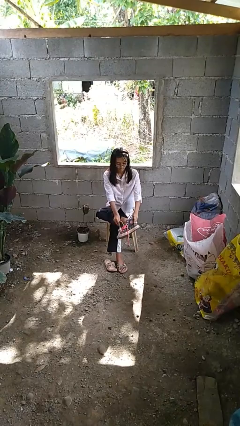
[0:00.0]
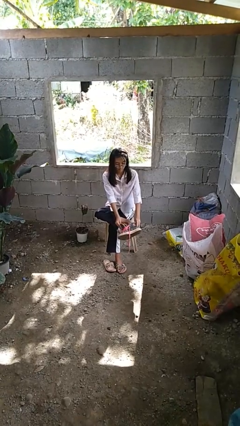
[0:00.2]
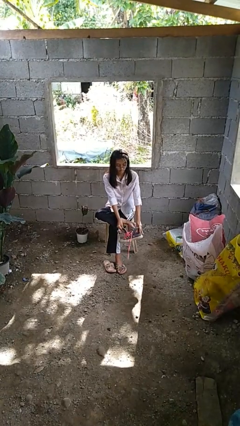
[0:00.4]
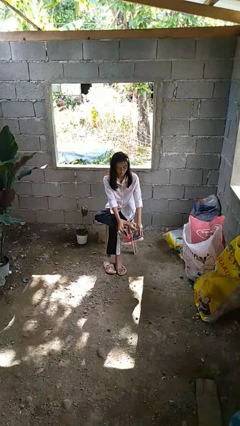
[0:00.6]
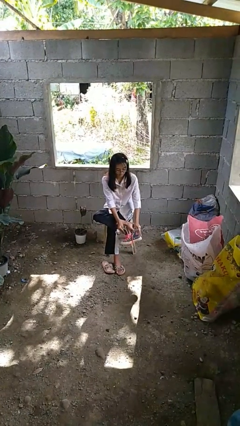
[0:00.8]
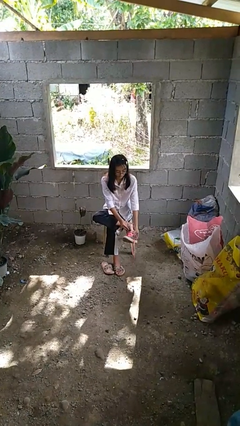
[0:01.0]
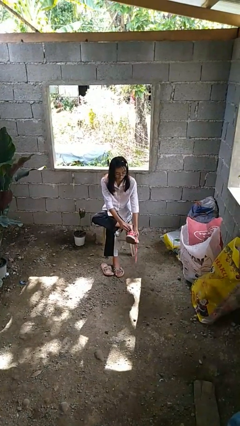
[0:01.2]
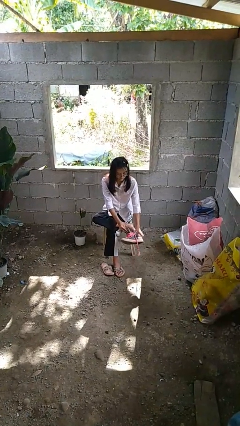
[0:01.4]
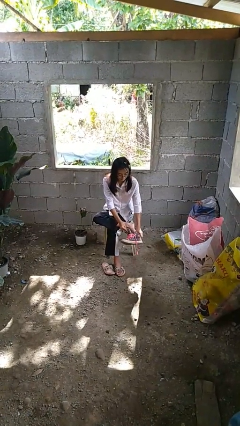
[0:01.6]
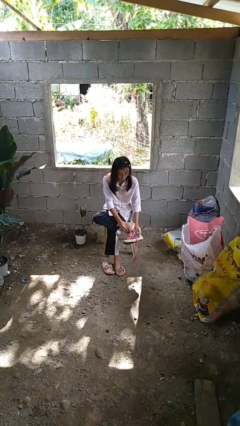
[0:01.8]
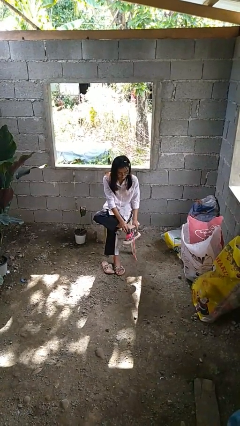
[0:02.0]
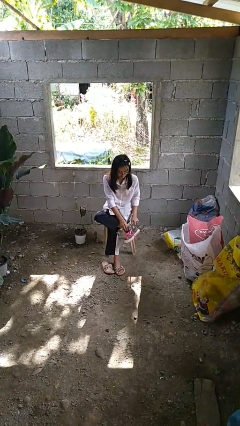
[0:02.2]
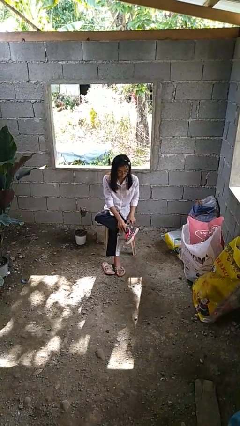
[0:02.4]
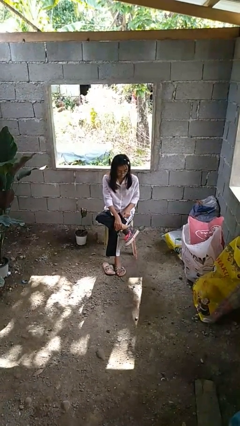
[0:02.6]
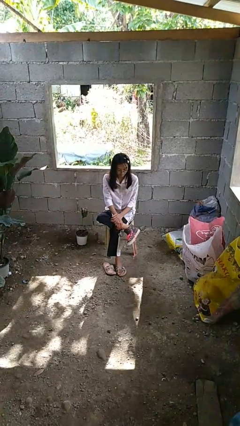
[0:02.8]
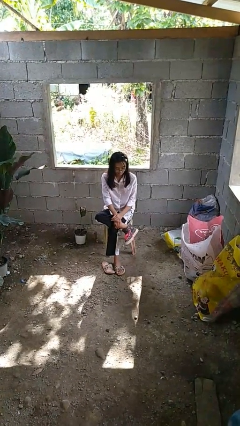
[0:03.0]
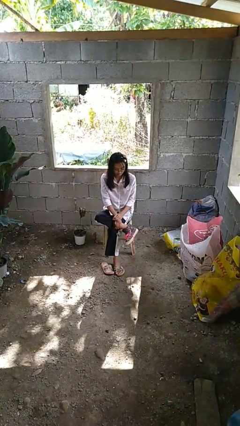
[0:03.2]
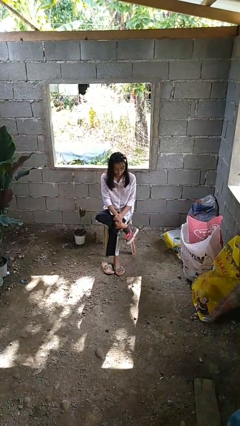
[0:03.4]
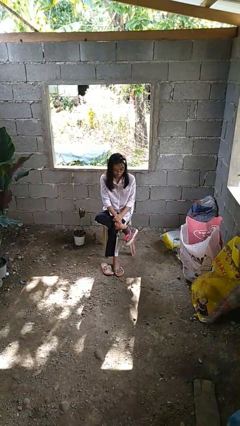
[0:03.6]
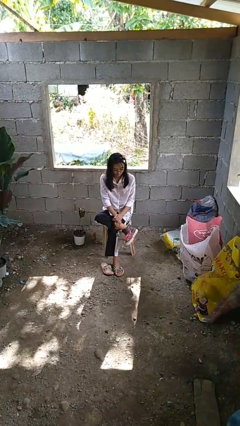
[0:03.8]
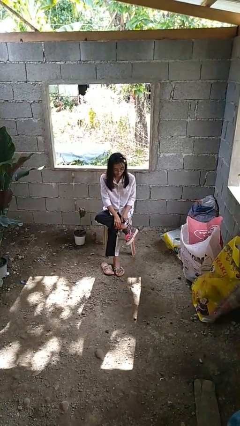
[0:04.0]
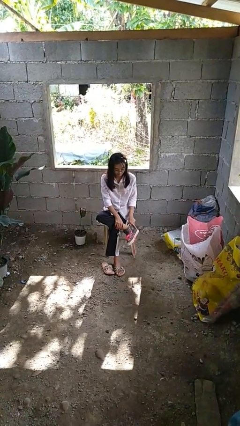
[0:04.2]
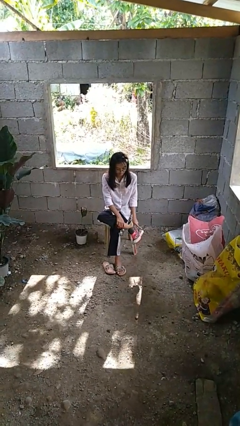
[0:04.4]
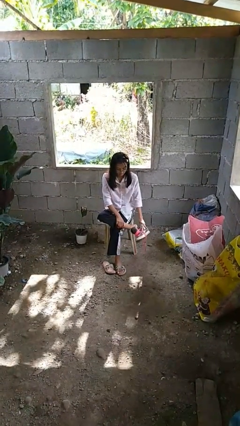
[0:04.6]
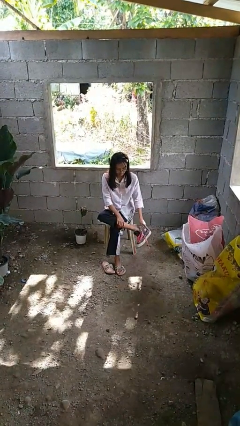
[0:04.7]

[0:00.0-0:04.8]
person puts on shoes

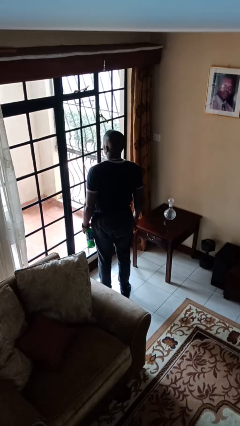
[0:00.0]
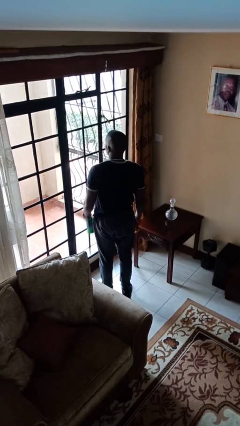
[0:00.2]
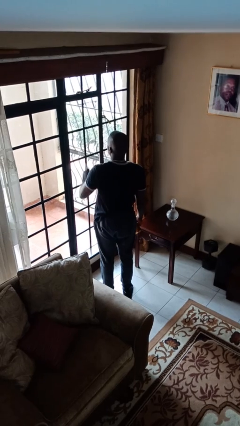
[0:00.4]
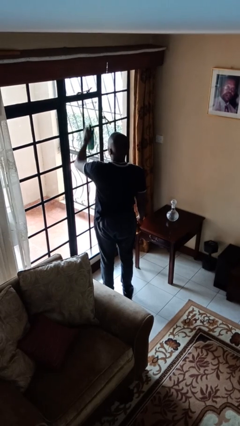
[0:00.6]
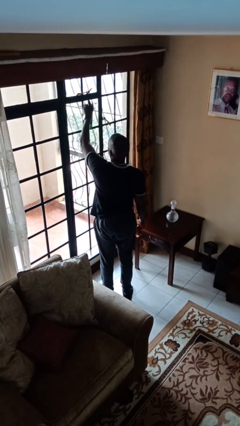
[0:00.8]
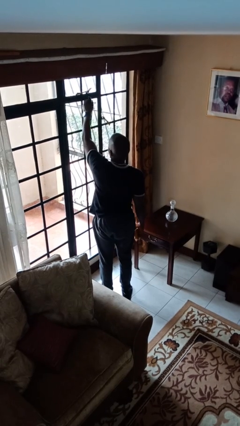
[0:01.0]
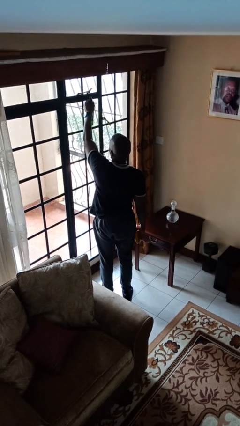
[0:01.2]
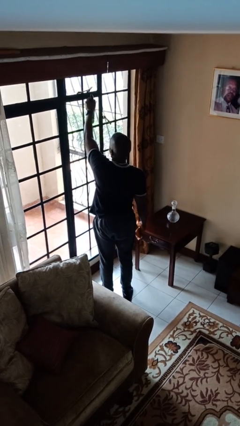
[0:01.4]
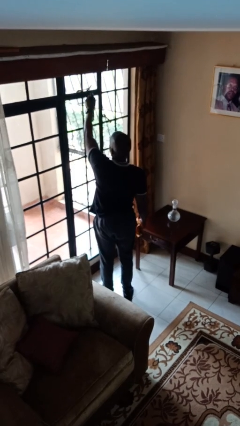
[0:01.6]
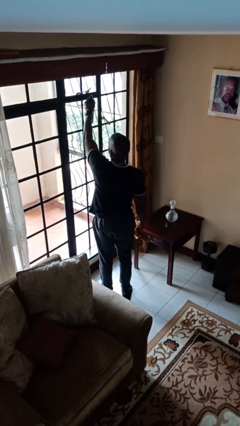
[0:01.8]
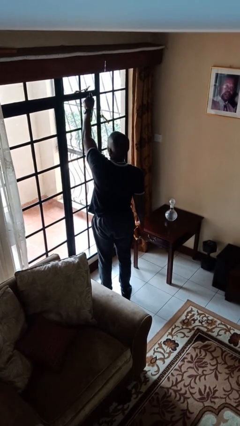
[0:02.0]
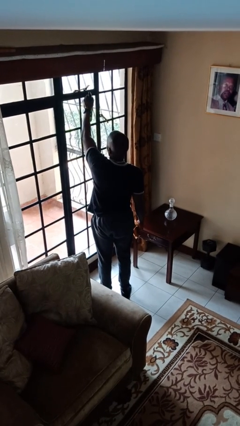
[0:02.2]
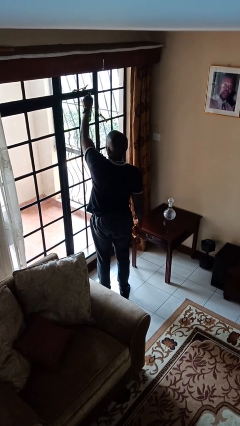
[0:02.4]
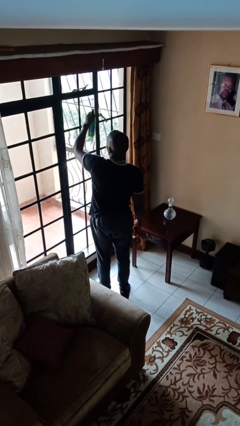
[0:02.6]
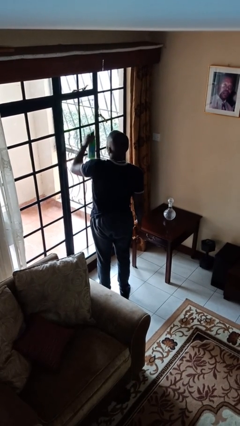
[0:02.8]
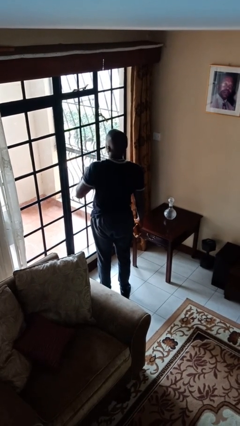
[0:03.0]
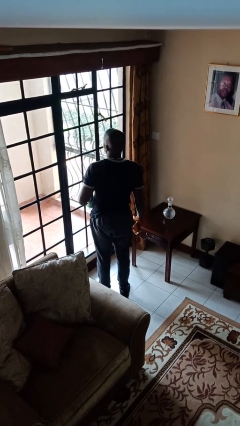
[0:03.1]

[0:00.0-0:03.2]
person sprays from bottle

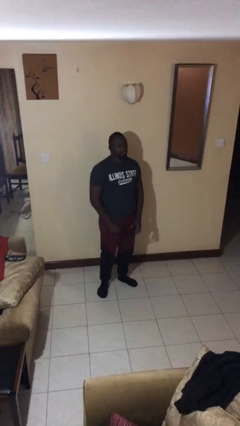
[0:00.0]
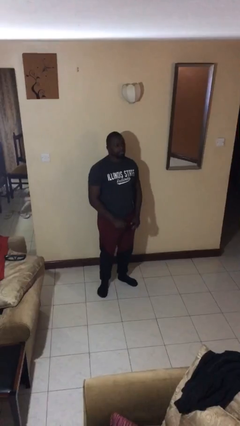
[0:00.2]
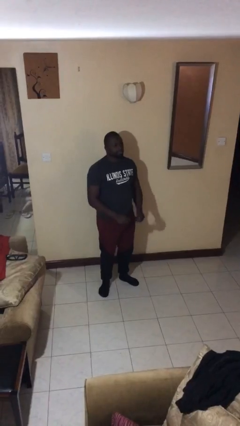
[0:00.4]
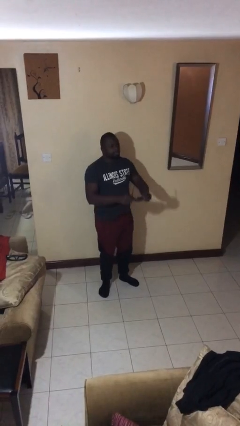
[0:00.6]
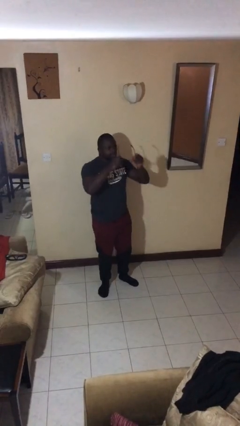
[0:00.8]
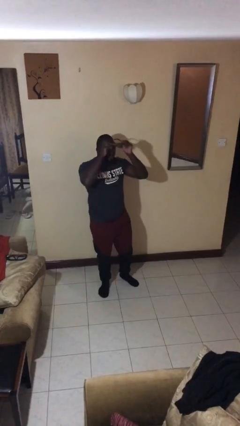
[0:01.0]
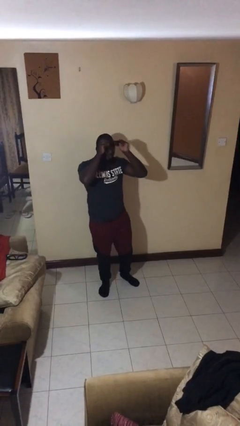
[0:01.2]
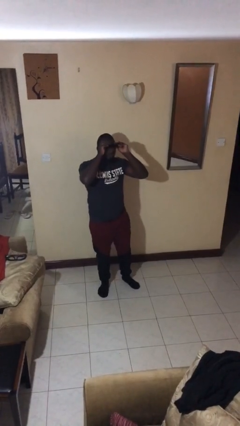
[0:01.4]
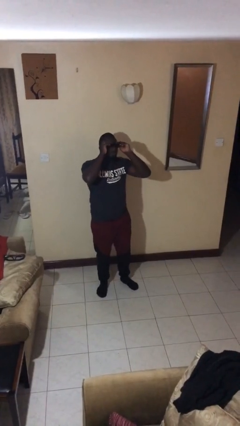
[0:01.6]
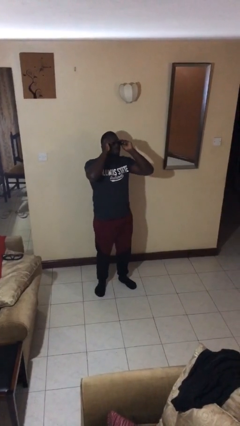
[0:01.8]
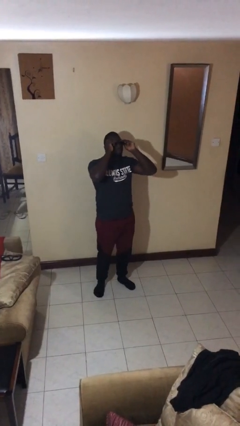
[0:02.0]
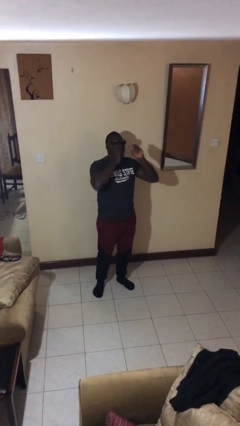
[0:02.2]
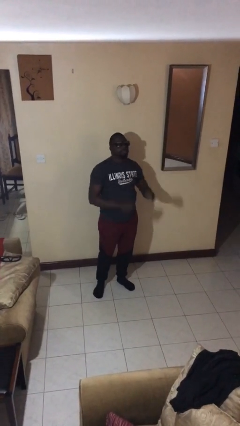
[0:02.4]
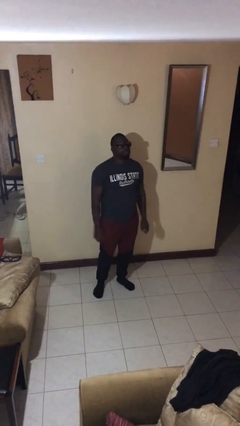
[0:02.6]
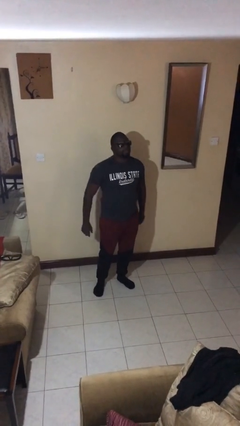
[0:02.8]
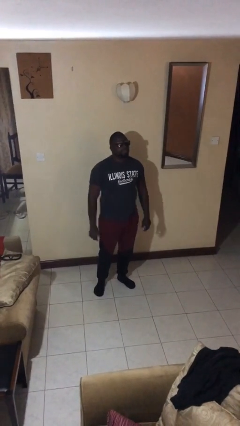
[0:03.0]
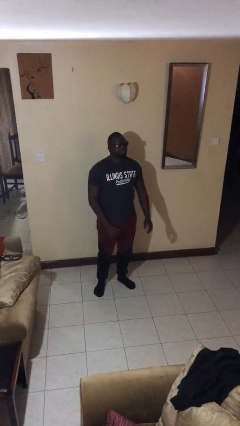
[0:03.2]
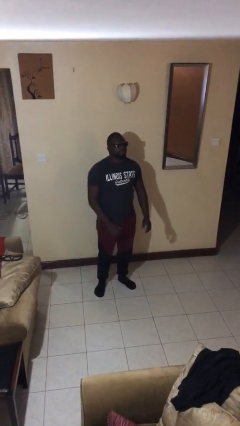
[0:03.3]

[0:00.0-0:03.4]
person puts on sunglasses

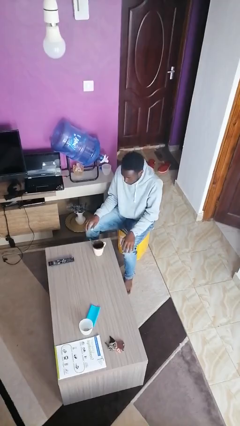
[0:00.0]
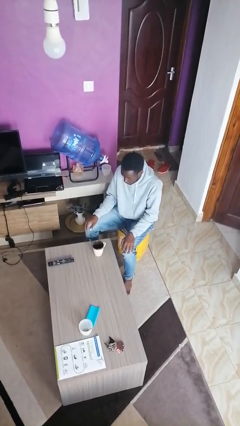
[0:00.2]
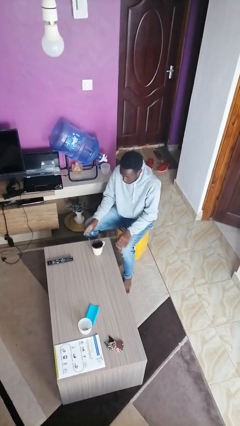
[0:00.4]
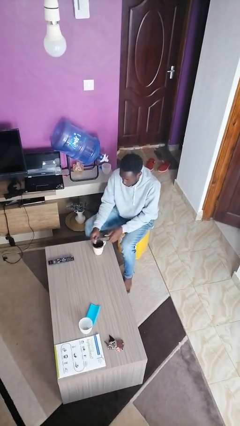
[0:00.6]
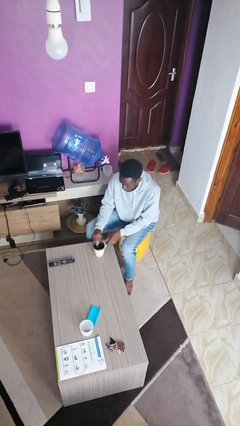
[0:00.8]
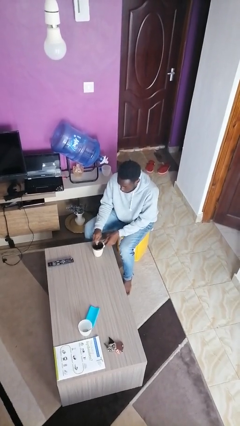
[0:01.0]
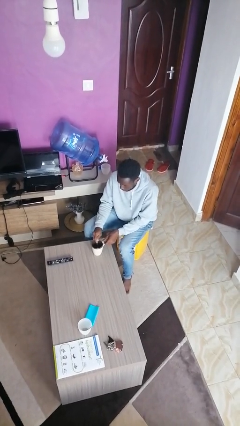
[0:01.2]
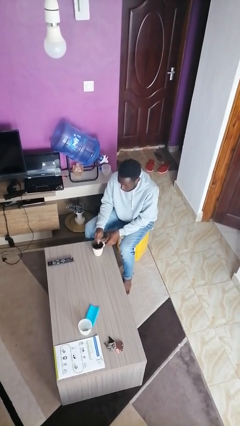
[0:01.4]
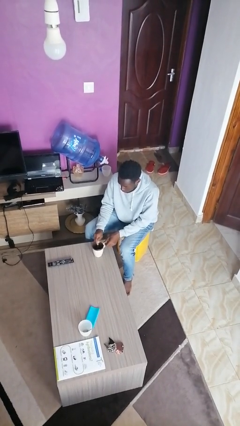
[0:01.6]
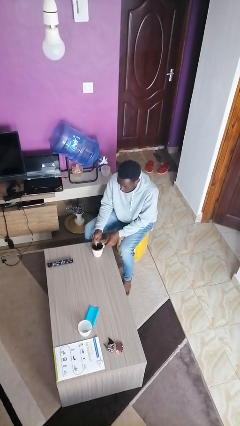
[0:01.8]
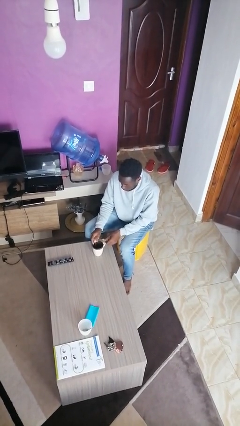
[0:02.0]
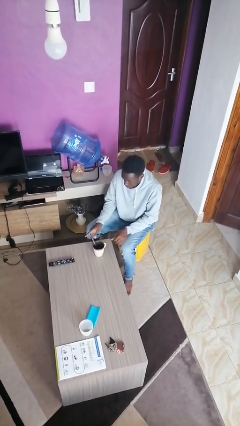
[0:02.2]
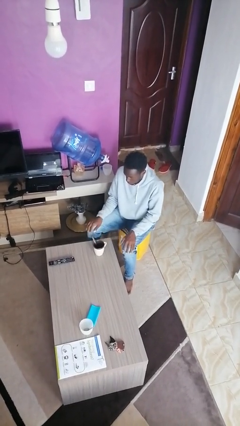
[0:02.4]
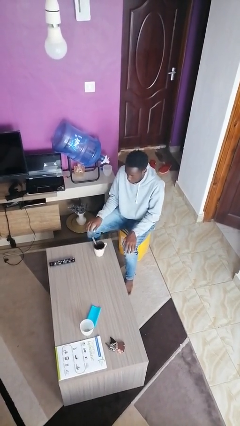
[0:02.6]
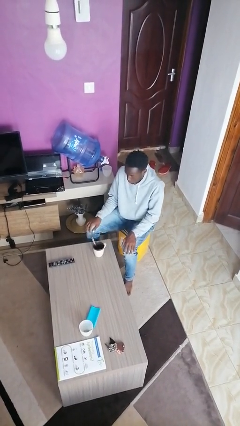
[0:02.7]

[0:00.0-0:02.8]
person stirs mug

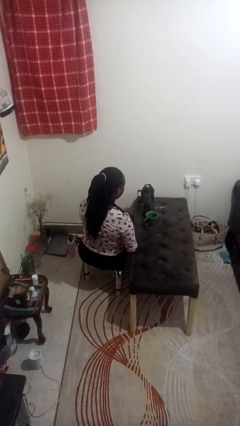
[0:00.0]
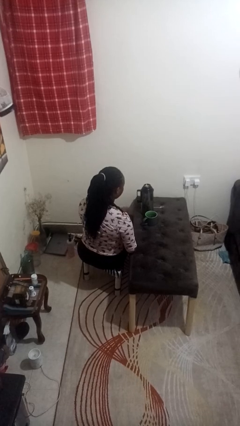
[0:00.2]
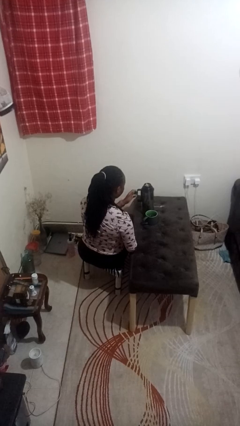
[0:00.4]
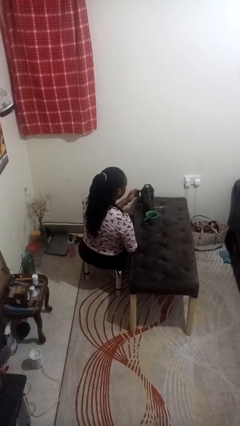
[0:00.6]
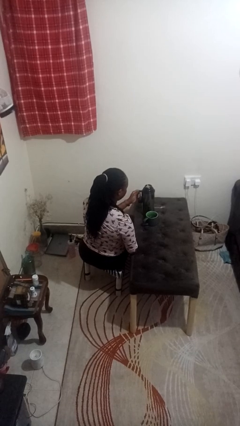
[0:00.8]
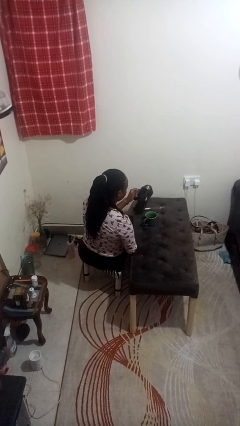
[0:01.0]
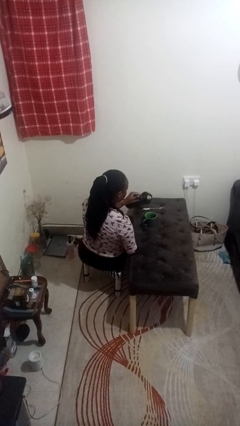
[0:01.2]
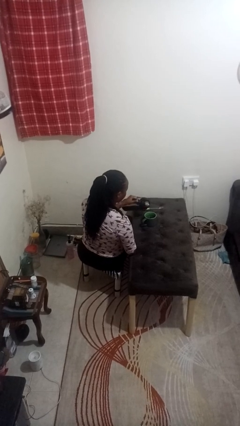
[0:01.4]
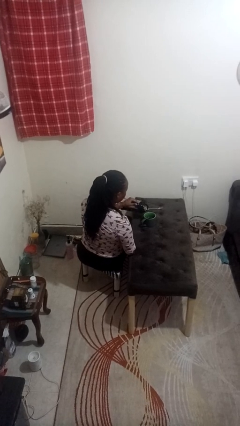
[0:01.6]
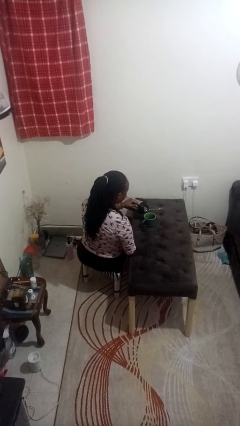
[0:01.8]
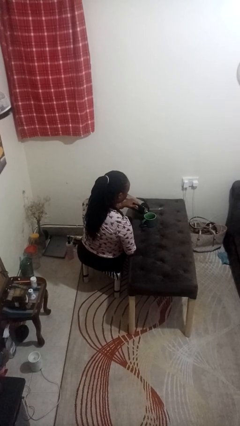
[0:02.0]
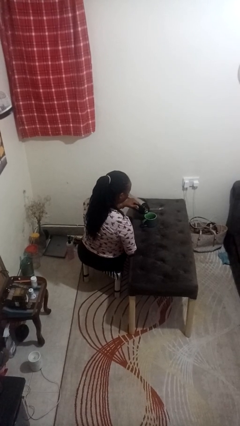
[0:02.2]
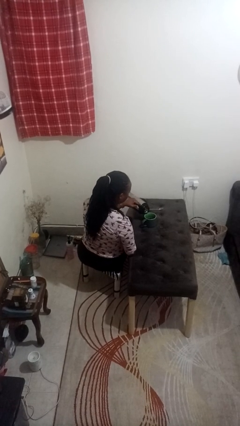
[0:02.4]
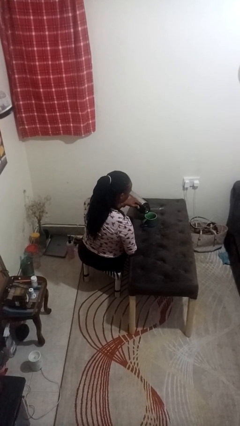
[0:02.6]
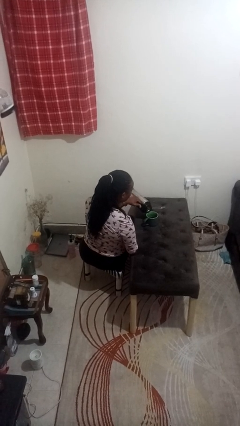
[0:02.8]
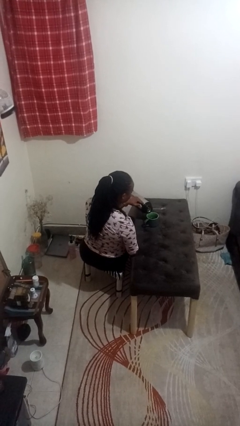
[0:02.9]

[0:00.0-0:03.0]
person pours coffee into mug

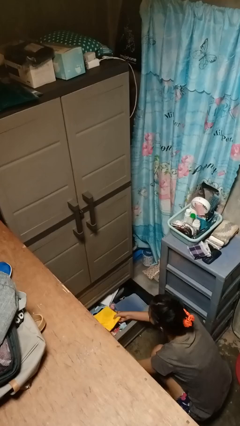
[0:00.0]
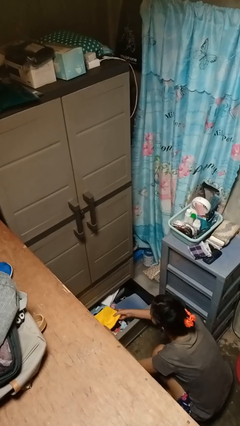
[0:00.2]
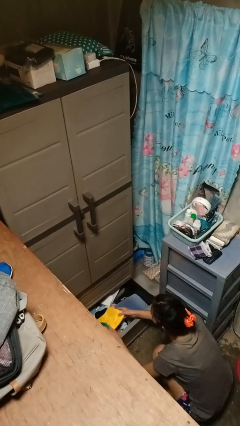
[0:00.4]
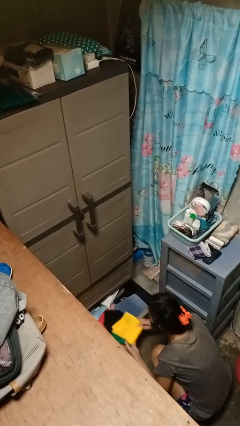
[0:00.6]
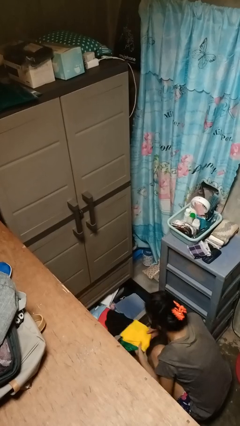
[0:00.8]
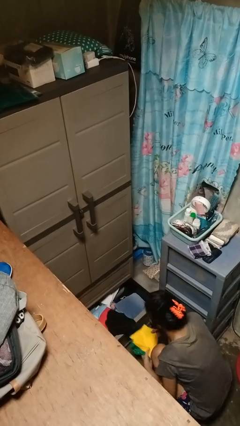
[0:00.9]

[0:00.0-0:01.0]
person takes clothes from dresser
